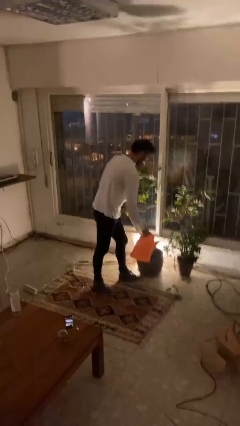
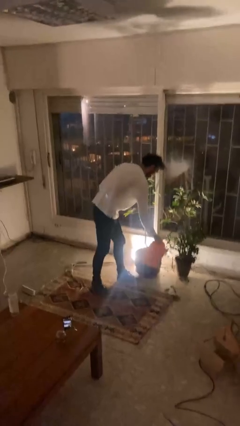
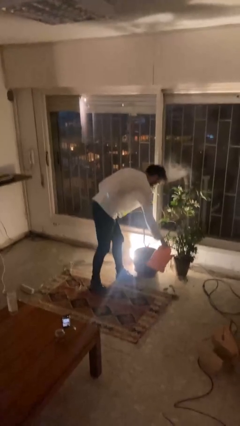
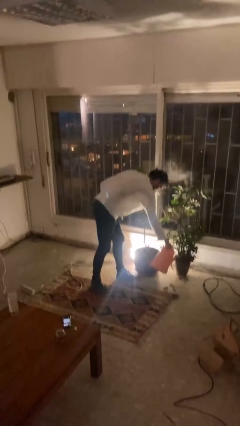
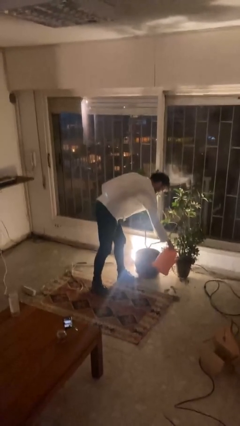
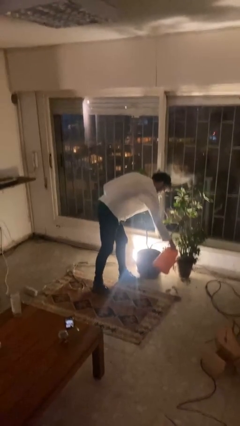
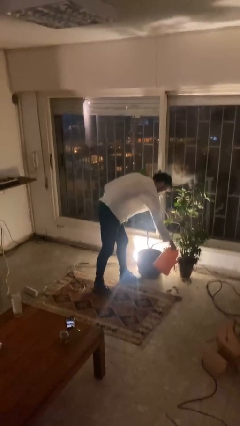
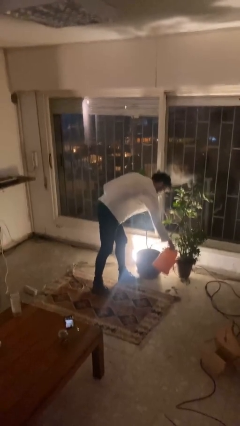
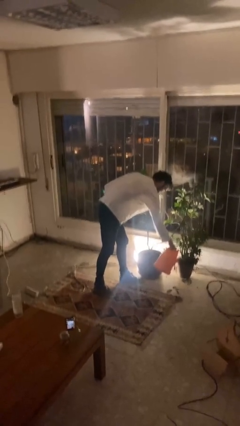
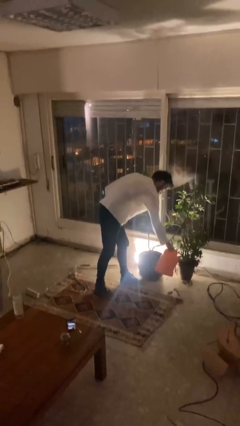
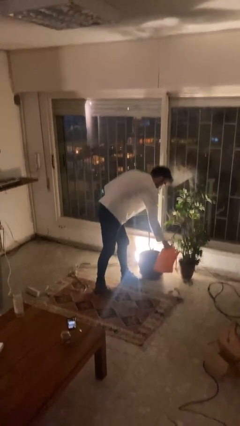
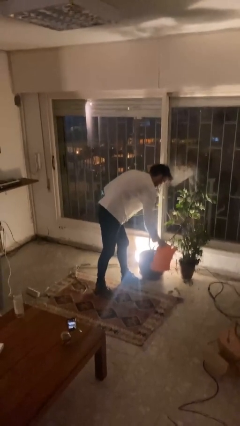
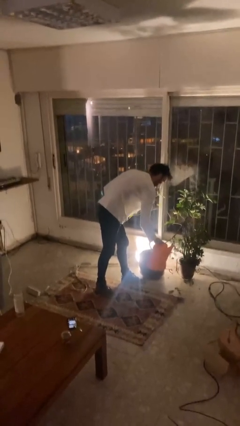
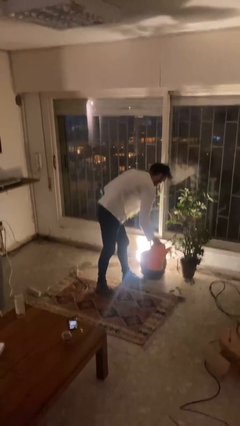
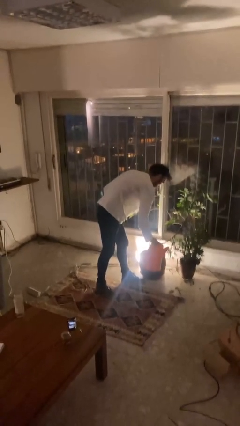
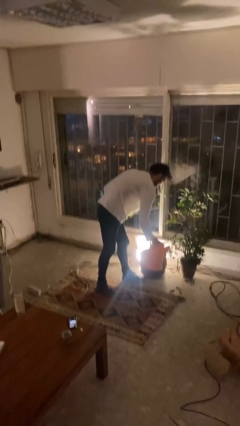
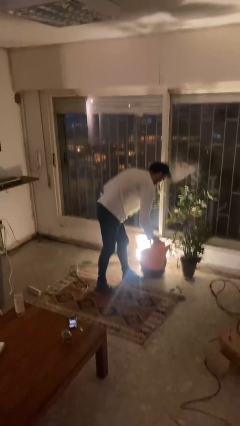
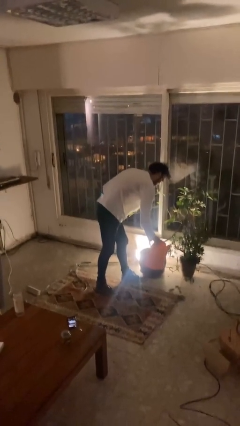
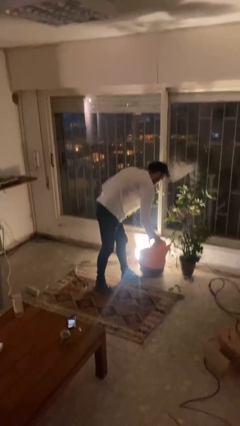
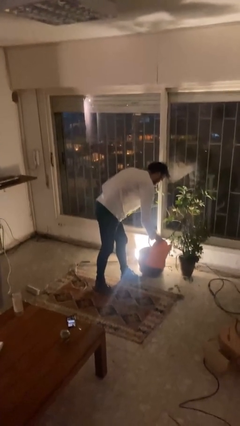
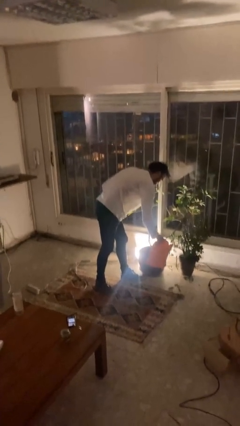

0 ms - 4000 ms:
person waters houseplant

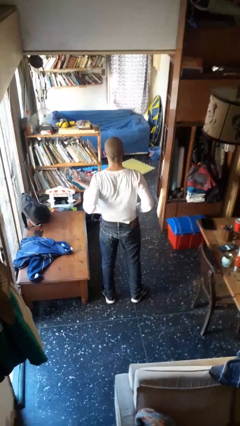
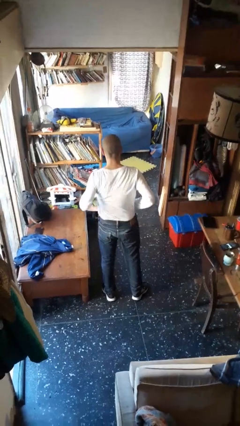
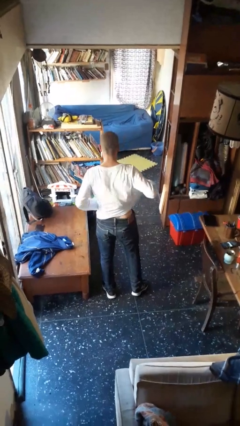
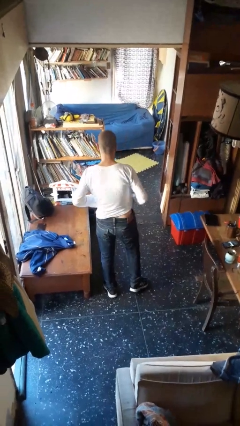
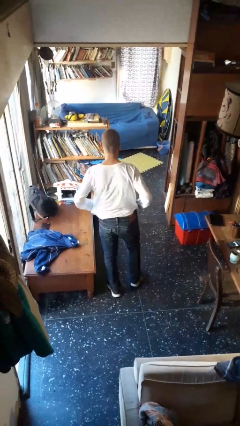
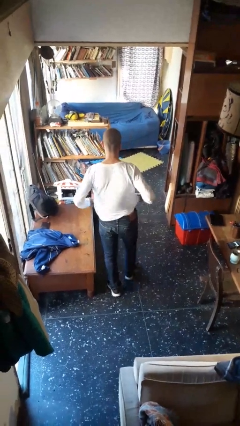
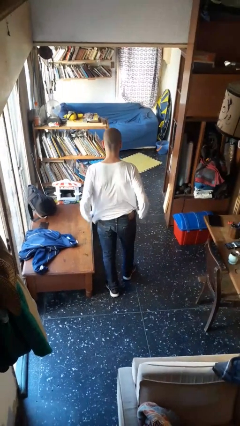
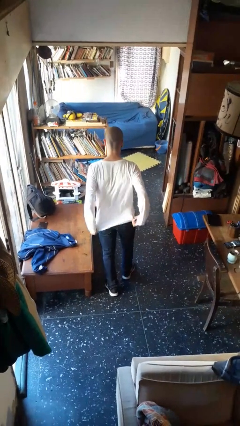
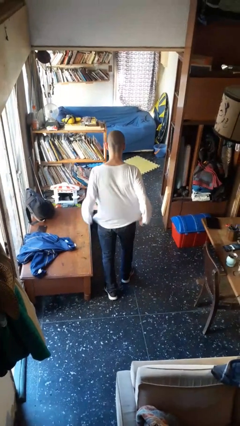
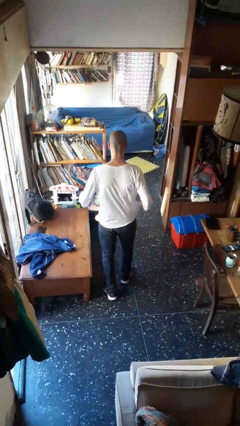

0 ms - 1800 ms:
person untucks shirt

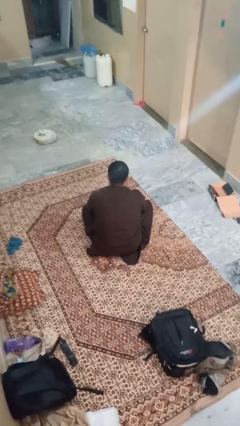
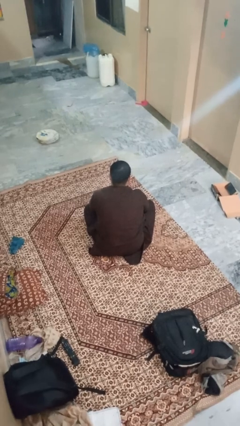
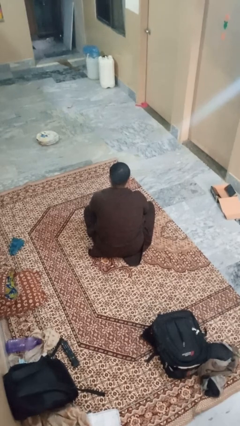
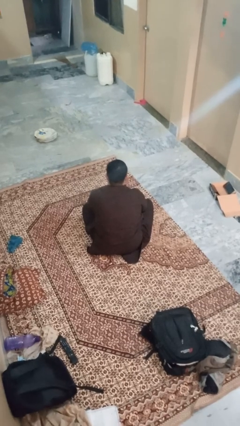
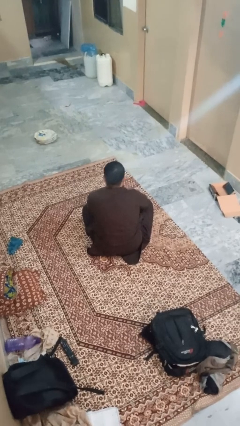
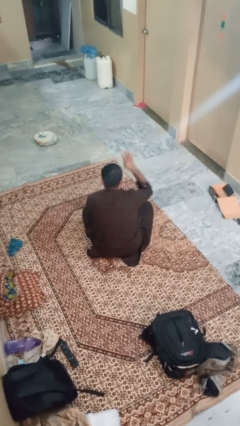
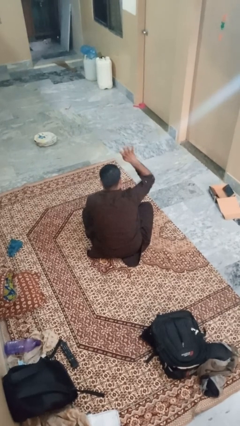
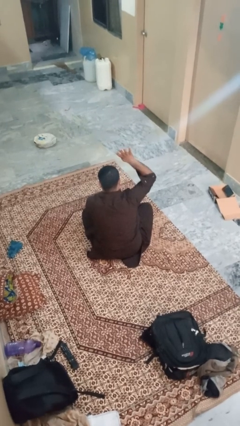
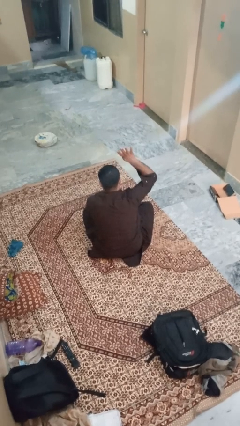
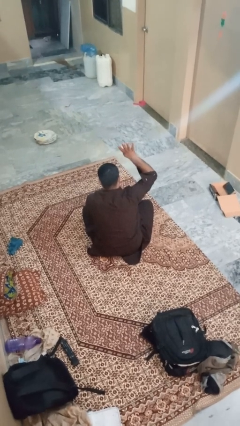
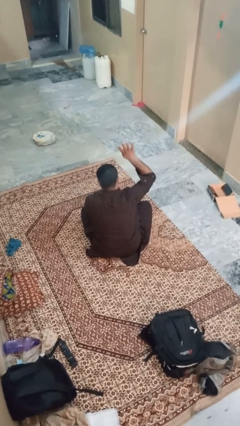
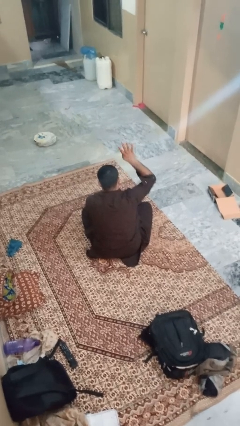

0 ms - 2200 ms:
person gestures number four

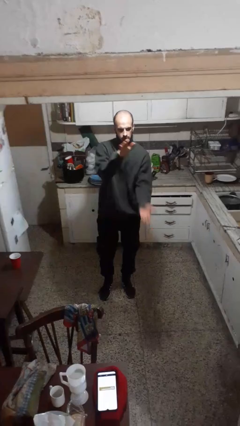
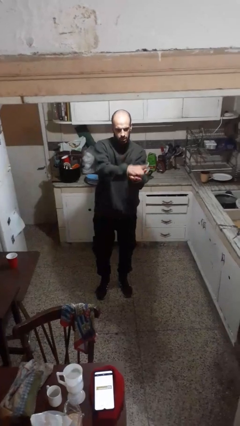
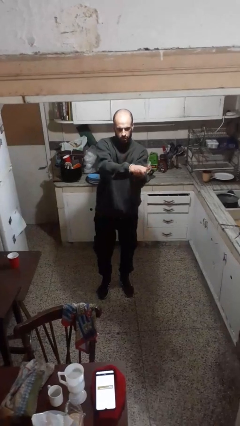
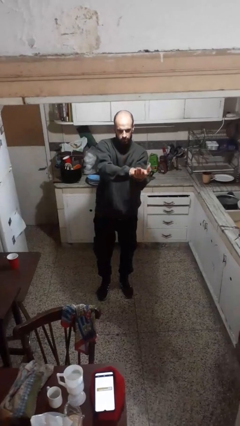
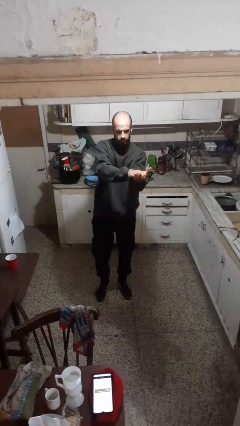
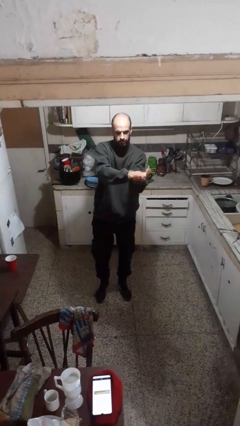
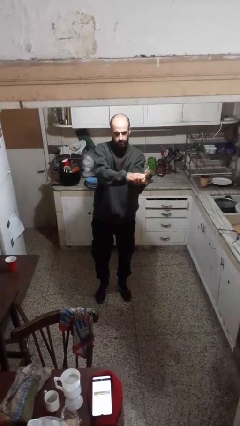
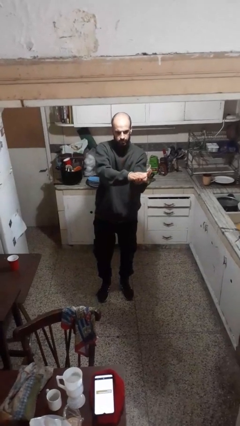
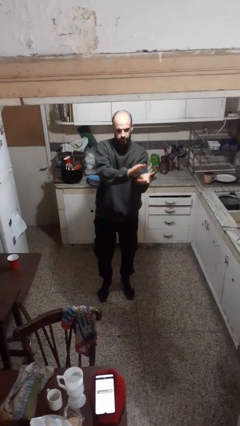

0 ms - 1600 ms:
person claps hands

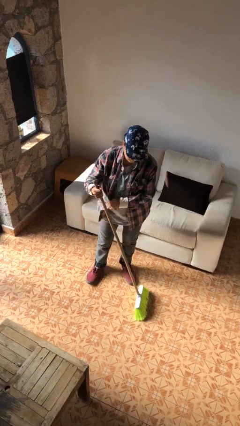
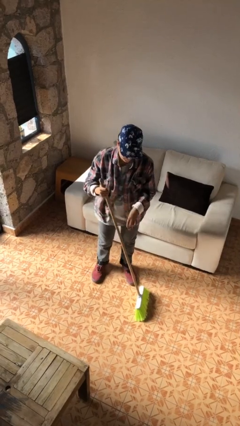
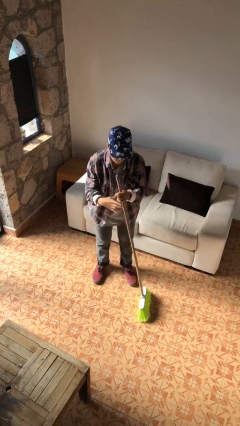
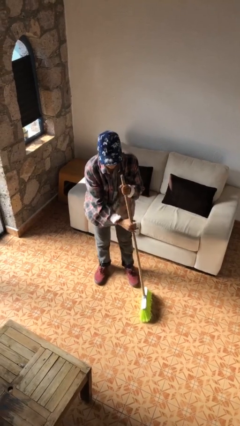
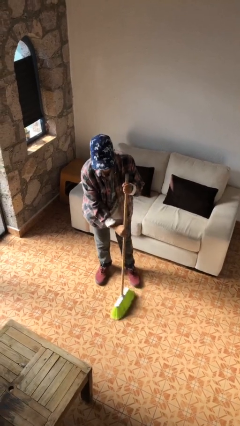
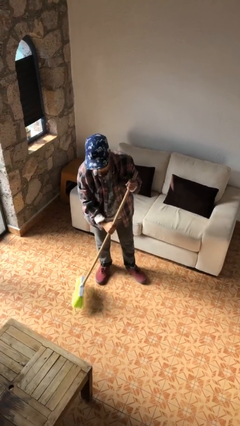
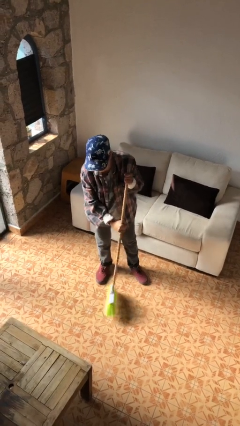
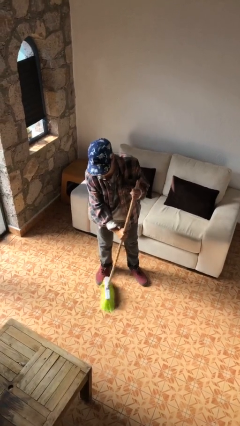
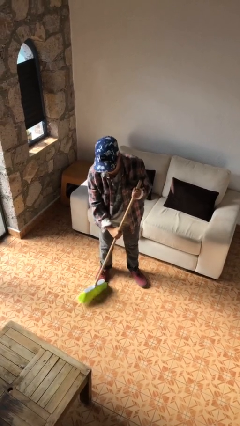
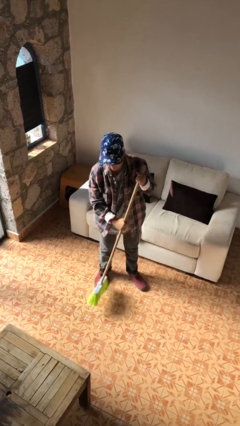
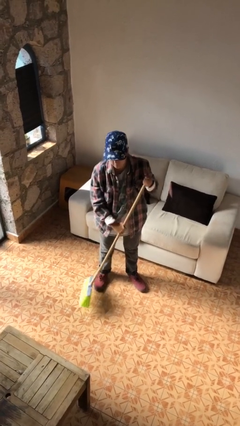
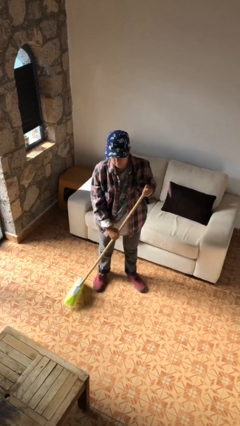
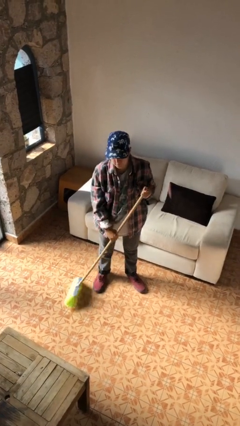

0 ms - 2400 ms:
person sweeps floor

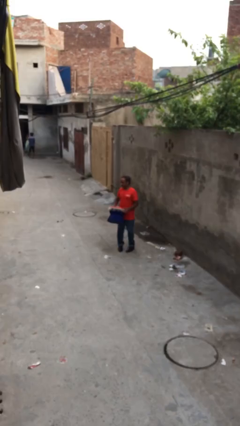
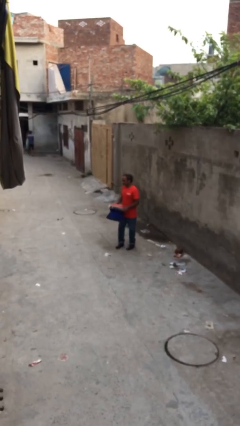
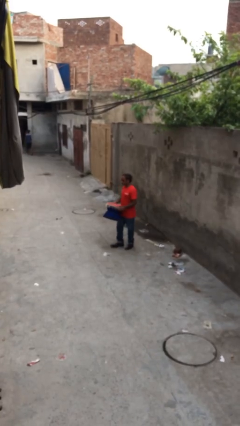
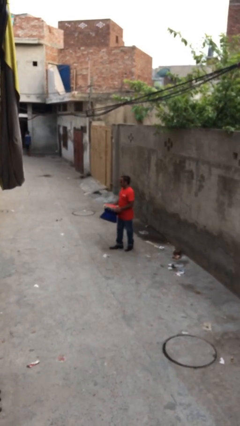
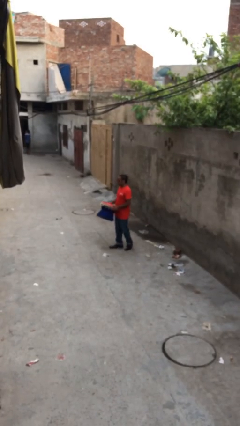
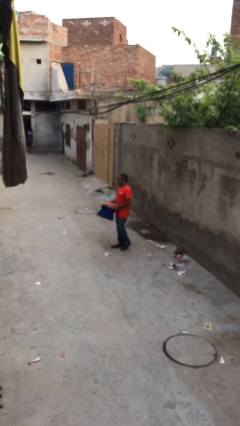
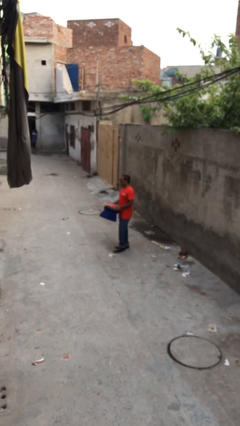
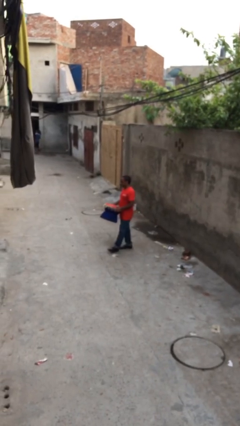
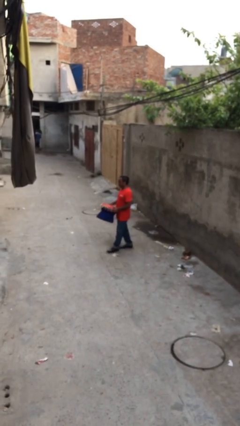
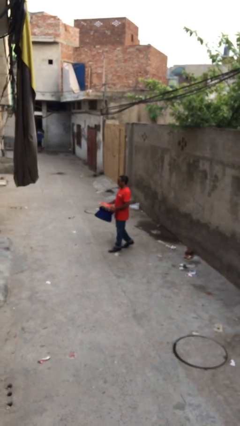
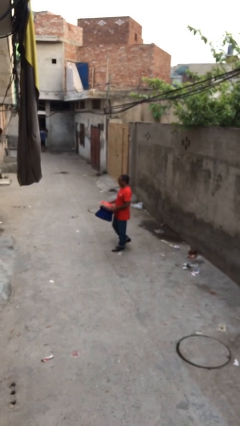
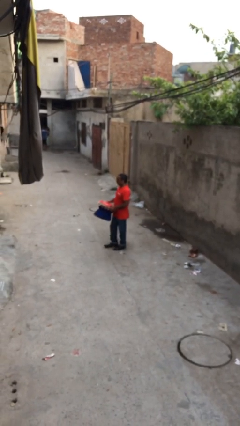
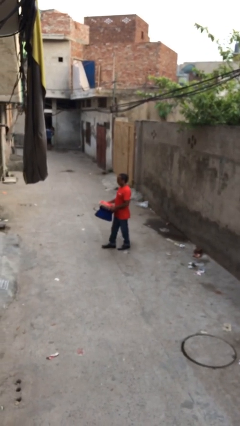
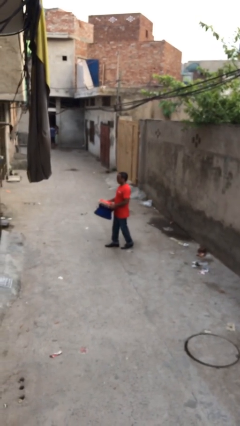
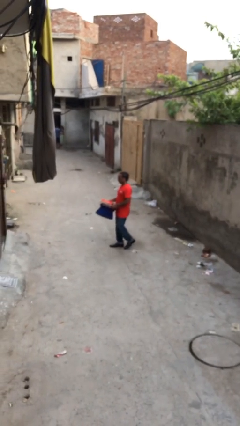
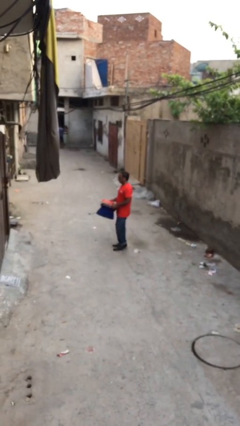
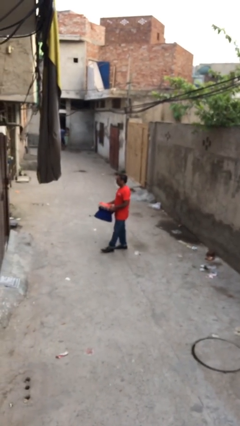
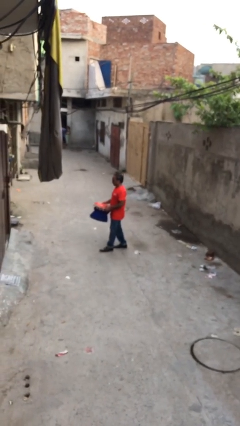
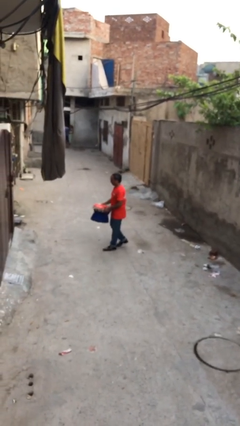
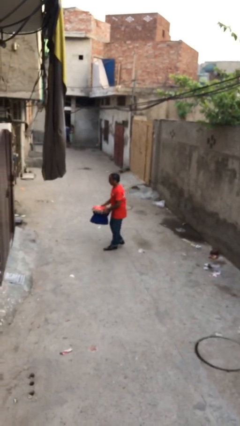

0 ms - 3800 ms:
person carries heavy object

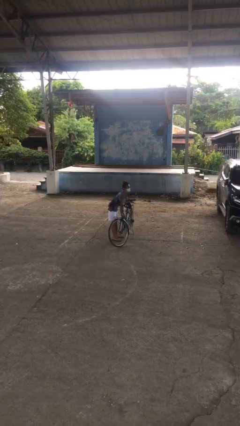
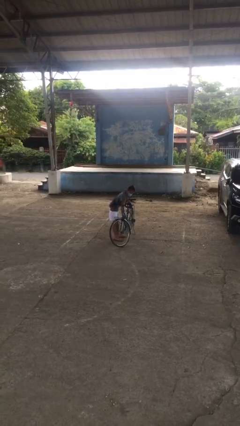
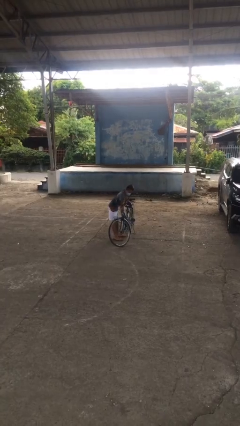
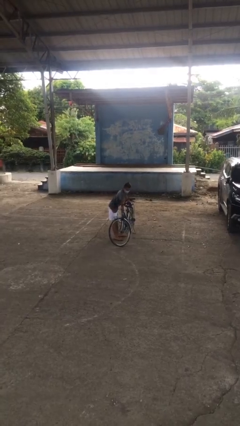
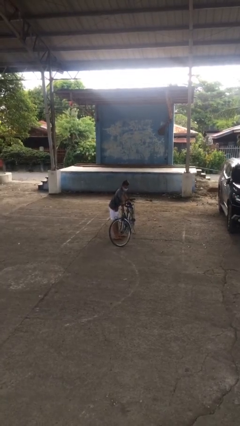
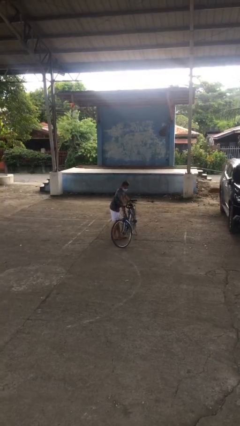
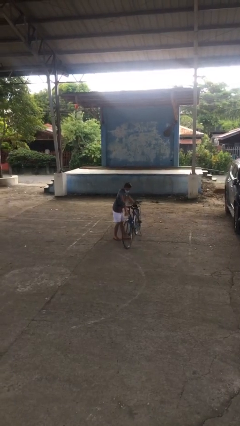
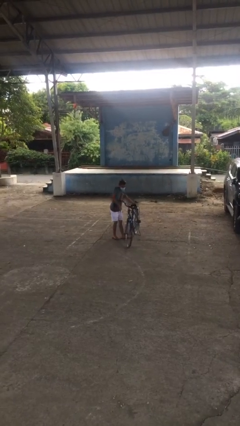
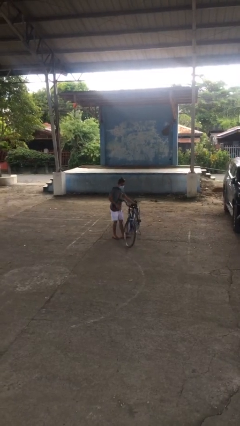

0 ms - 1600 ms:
person puts down object on floor
